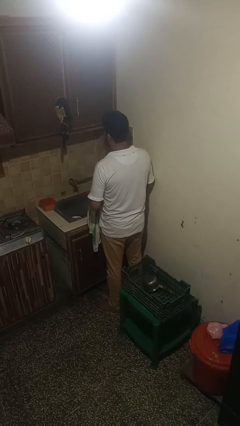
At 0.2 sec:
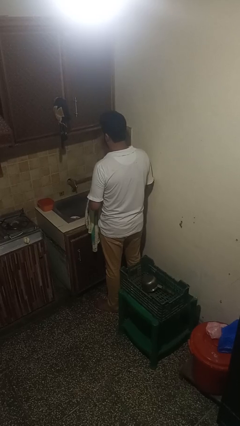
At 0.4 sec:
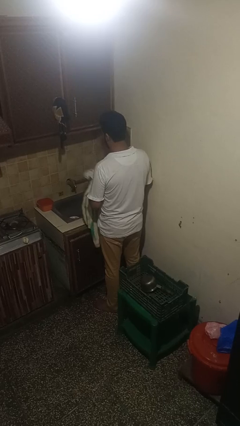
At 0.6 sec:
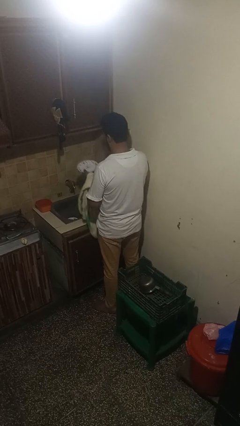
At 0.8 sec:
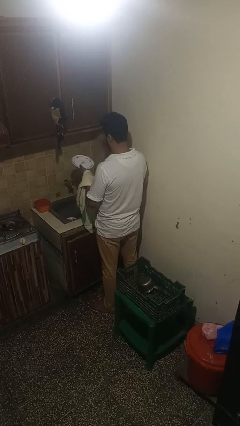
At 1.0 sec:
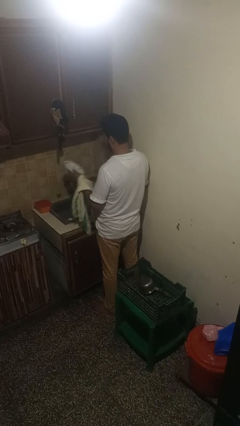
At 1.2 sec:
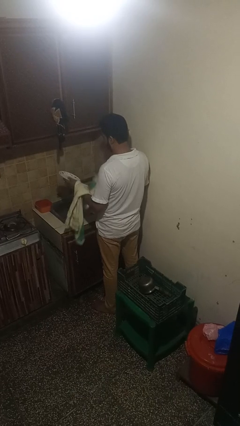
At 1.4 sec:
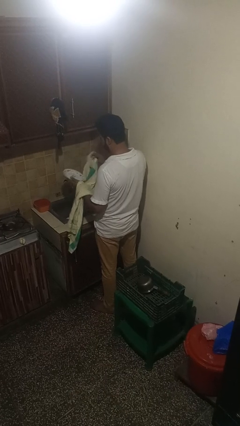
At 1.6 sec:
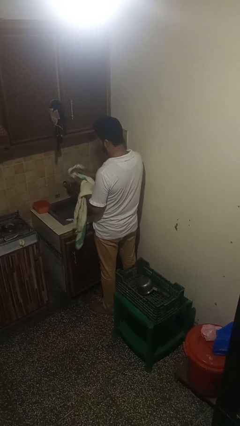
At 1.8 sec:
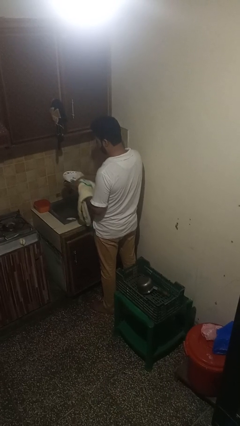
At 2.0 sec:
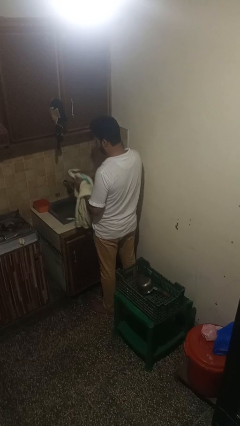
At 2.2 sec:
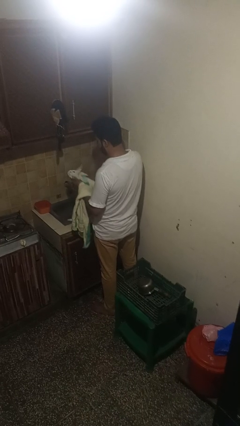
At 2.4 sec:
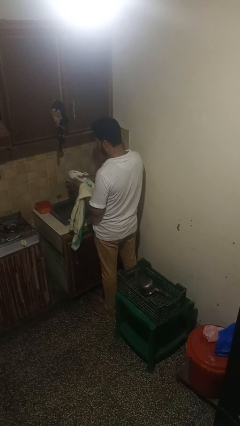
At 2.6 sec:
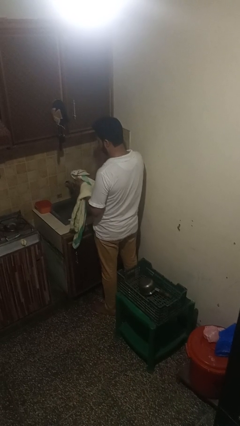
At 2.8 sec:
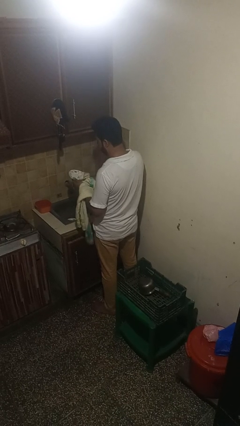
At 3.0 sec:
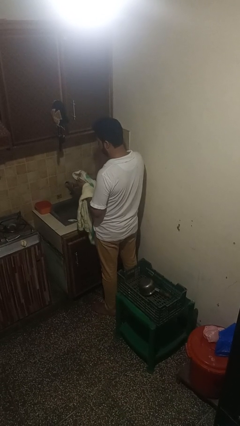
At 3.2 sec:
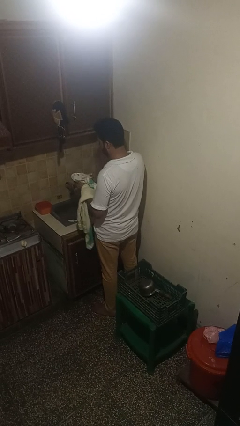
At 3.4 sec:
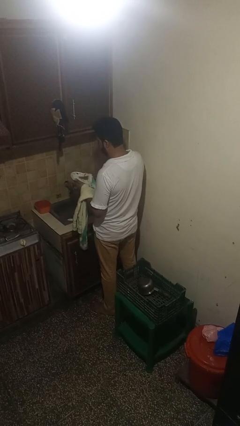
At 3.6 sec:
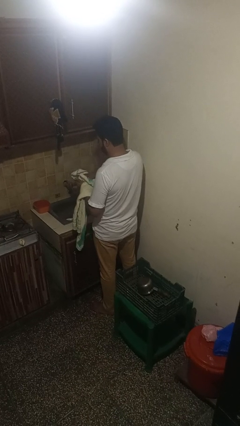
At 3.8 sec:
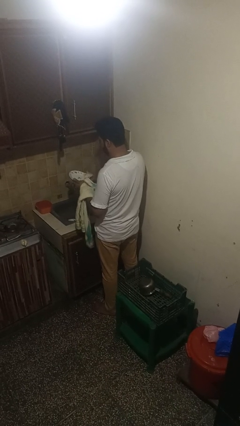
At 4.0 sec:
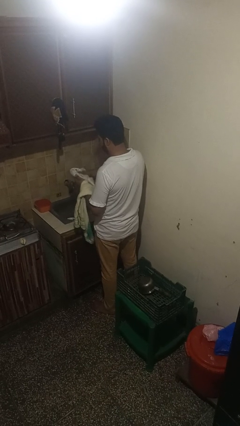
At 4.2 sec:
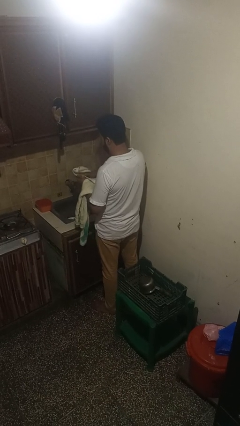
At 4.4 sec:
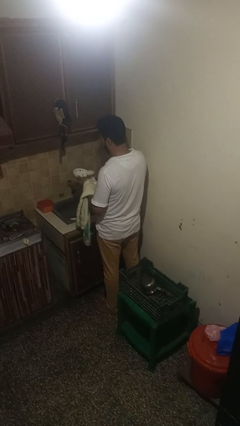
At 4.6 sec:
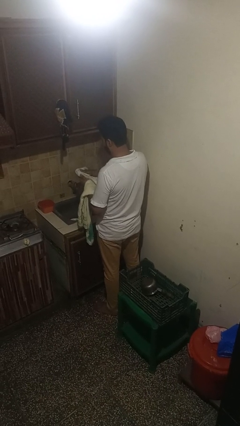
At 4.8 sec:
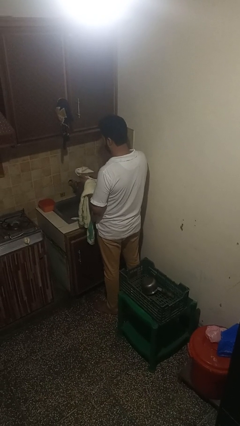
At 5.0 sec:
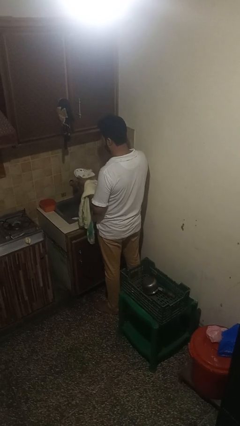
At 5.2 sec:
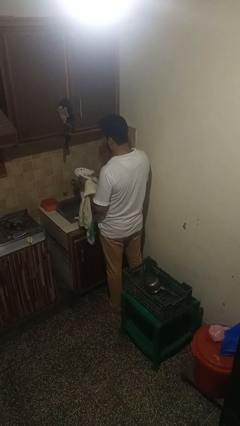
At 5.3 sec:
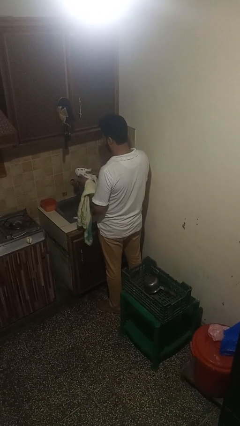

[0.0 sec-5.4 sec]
person dries dish

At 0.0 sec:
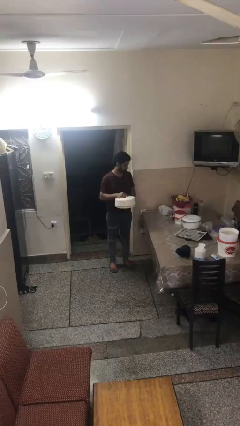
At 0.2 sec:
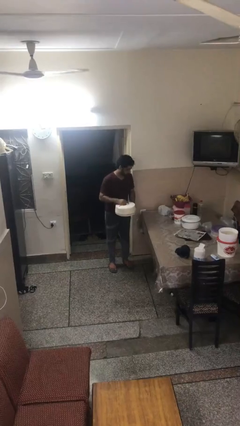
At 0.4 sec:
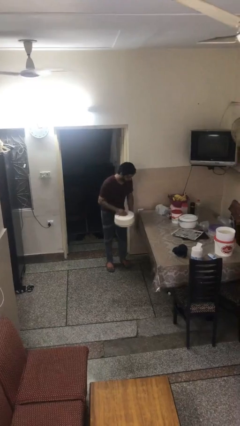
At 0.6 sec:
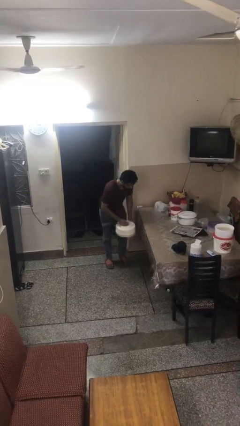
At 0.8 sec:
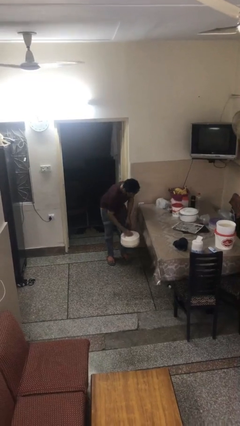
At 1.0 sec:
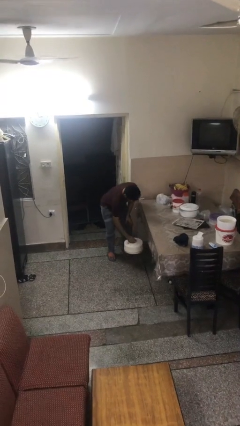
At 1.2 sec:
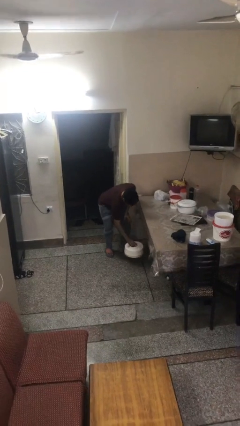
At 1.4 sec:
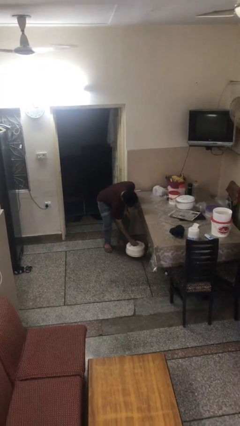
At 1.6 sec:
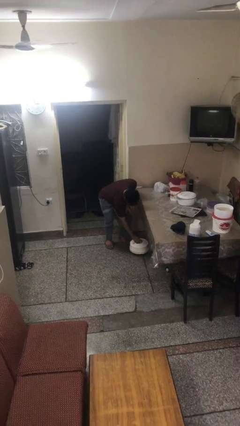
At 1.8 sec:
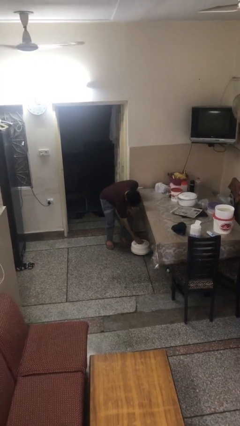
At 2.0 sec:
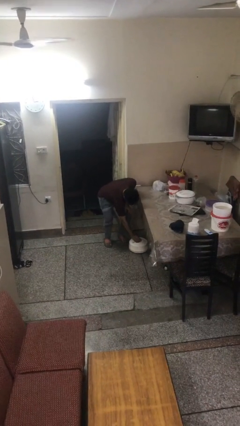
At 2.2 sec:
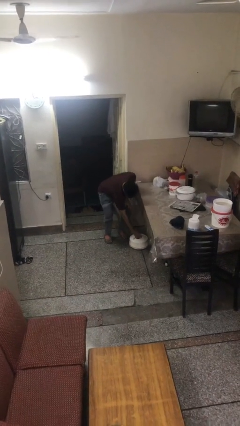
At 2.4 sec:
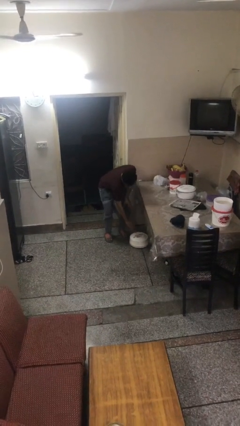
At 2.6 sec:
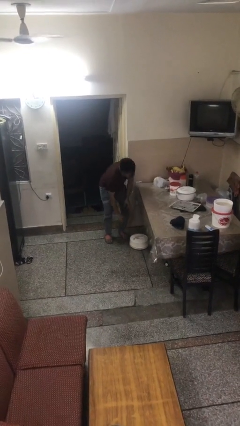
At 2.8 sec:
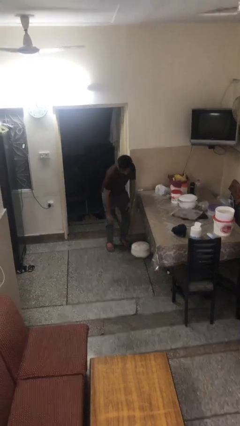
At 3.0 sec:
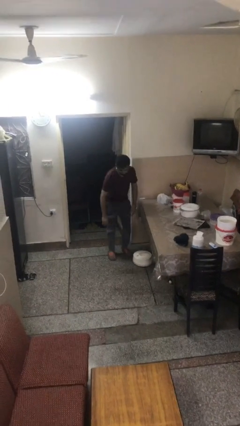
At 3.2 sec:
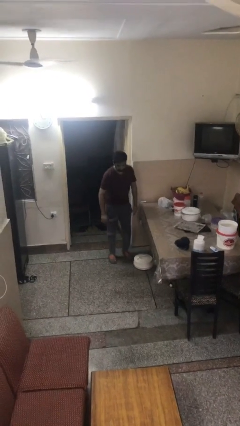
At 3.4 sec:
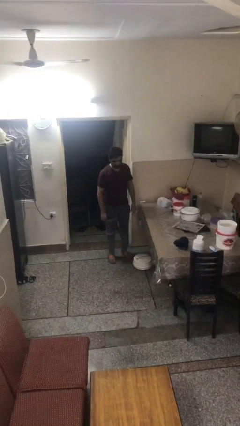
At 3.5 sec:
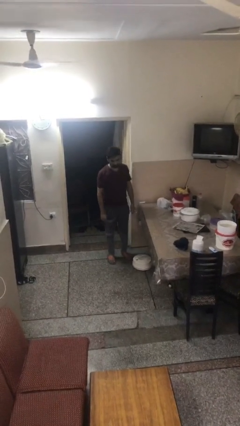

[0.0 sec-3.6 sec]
person puts down object on floor

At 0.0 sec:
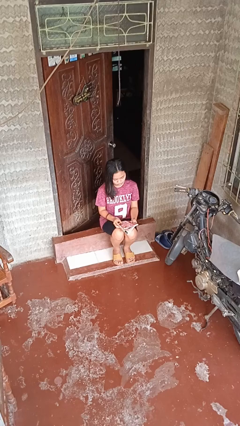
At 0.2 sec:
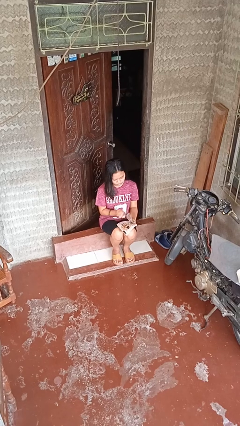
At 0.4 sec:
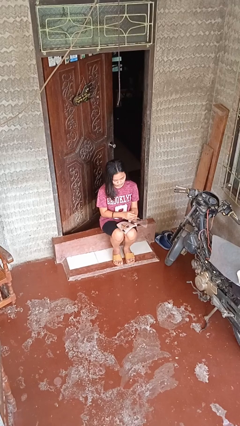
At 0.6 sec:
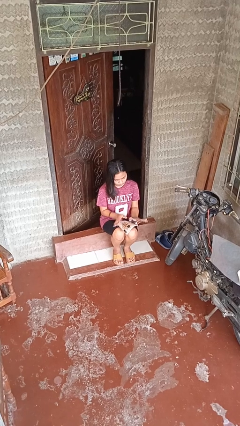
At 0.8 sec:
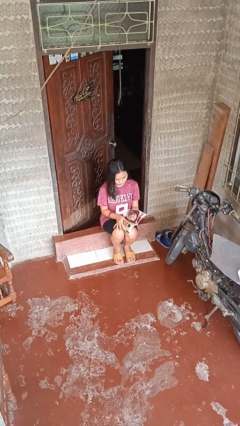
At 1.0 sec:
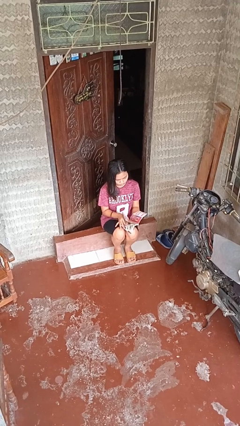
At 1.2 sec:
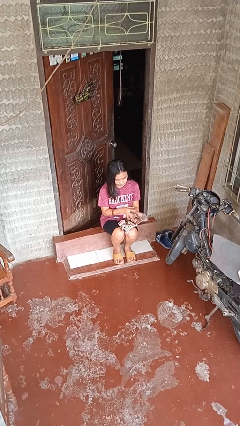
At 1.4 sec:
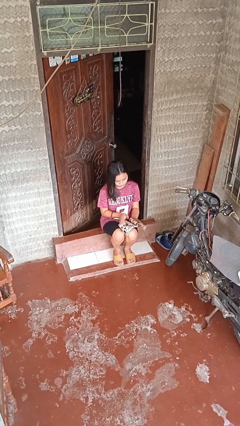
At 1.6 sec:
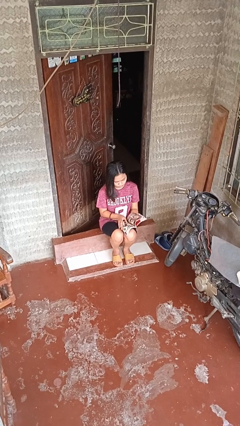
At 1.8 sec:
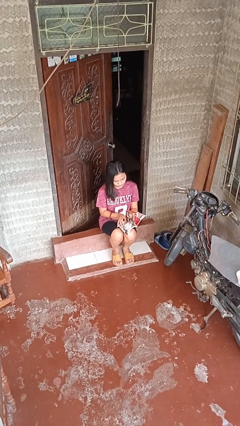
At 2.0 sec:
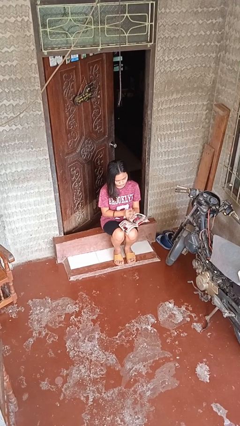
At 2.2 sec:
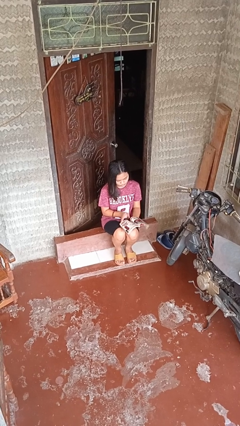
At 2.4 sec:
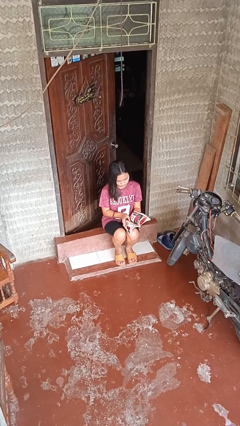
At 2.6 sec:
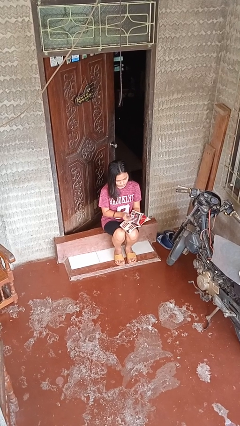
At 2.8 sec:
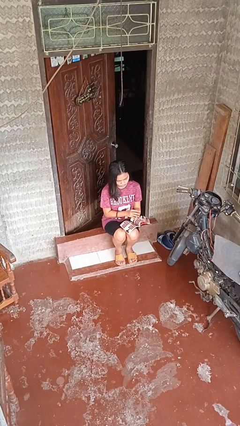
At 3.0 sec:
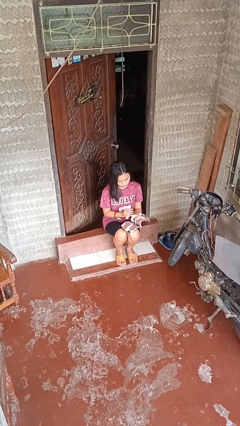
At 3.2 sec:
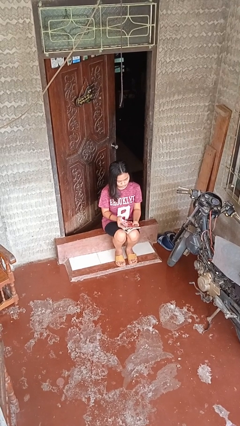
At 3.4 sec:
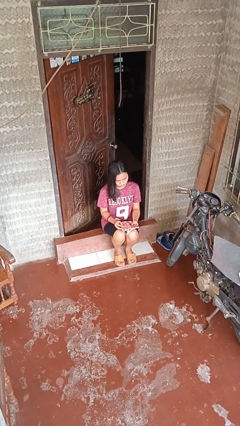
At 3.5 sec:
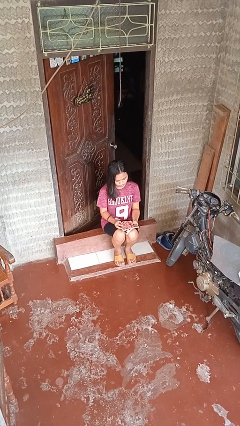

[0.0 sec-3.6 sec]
person reads magazine

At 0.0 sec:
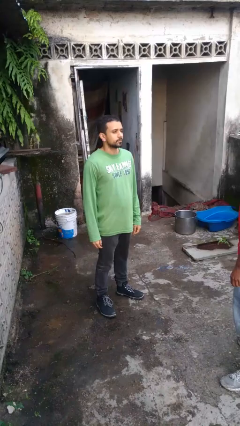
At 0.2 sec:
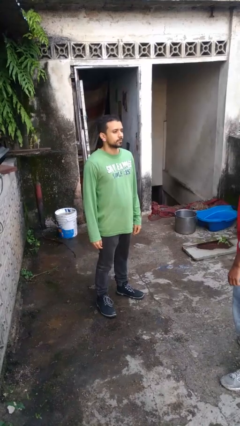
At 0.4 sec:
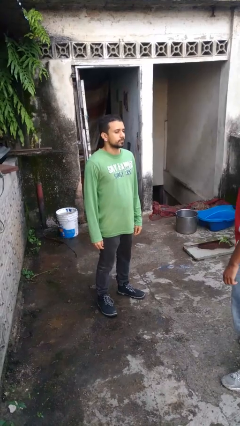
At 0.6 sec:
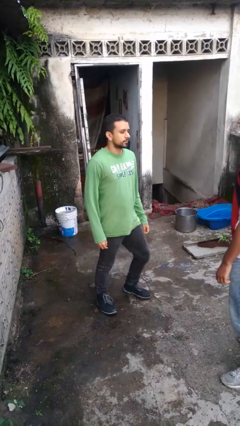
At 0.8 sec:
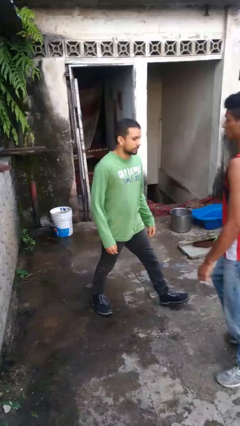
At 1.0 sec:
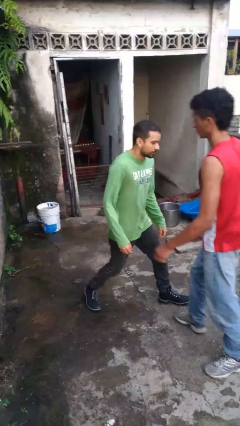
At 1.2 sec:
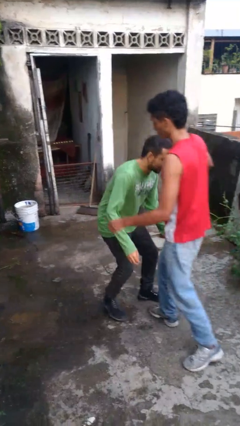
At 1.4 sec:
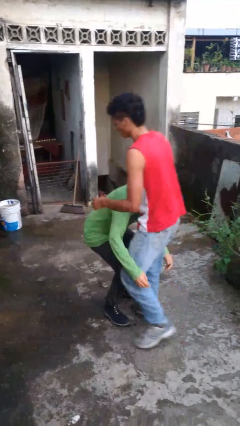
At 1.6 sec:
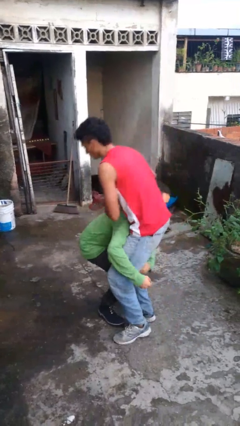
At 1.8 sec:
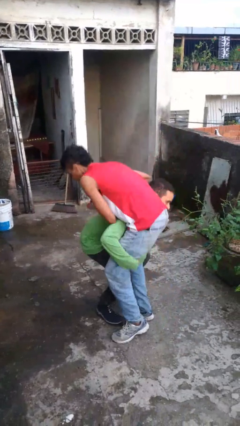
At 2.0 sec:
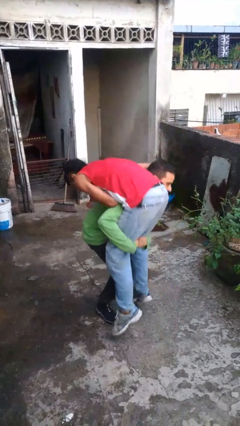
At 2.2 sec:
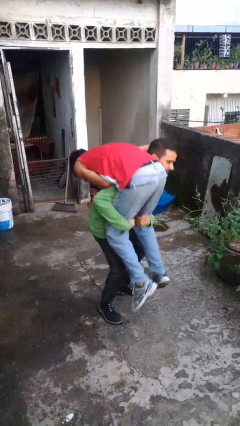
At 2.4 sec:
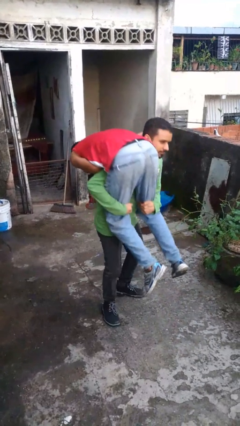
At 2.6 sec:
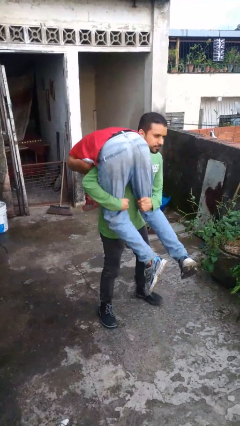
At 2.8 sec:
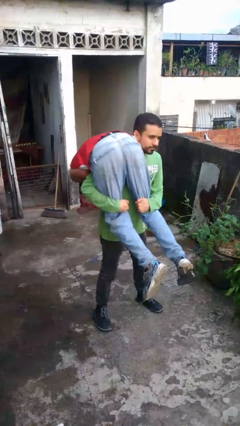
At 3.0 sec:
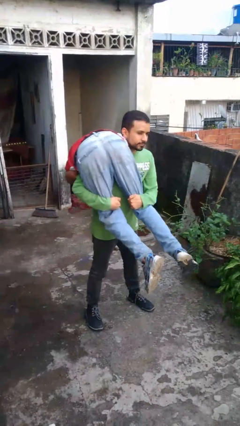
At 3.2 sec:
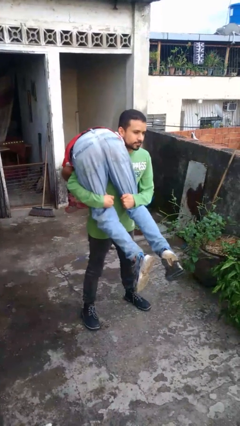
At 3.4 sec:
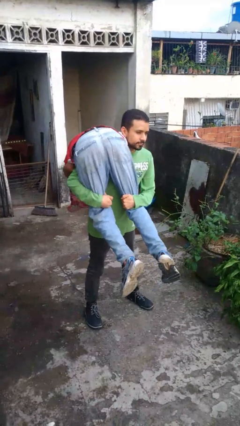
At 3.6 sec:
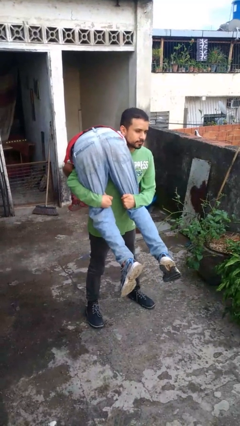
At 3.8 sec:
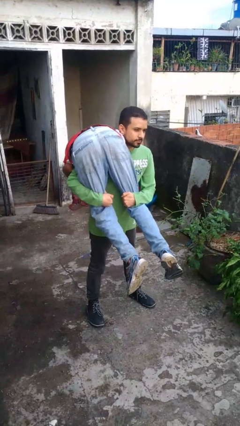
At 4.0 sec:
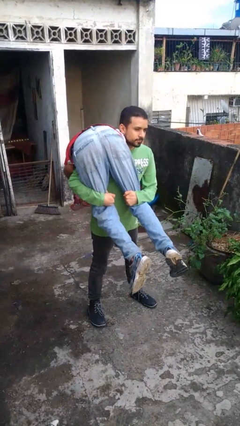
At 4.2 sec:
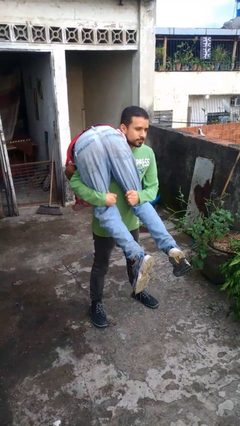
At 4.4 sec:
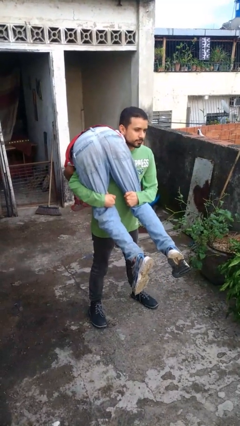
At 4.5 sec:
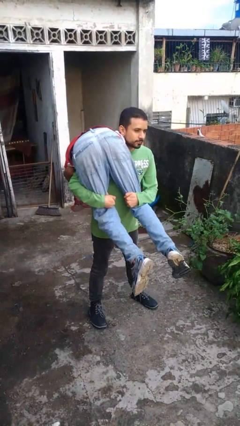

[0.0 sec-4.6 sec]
person carries person over shoulder

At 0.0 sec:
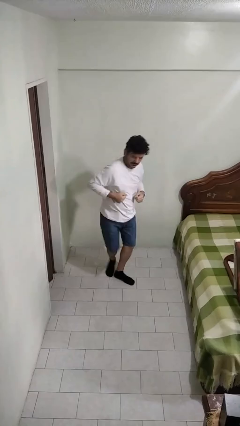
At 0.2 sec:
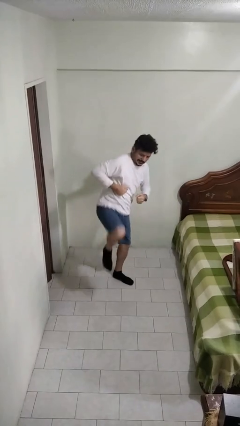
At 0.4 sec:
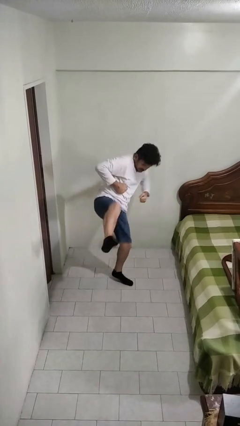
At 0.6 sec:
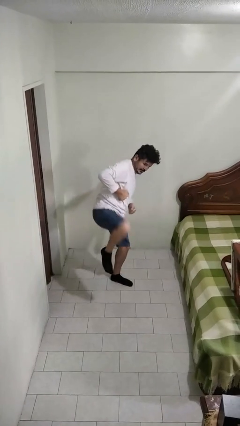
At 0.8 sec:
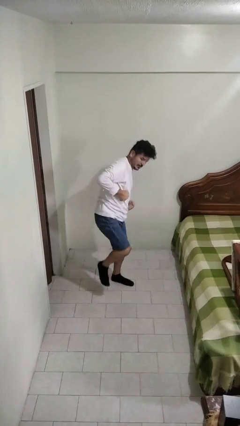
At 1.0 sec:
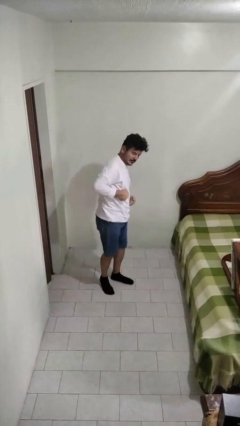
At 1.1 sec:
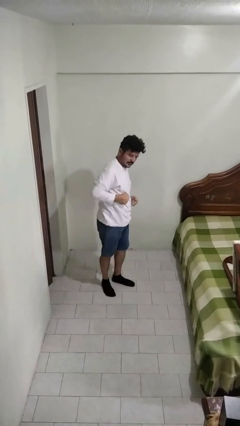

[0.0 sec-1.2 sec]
person karate kicks
